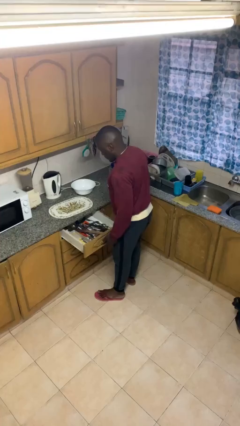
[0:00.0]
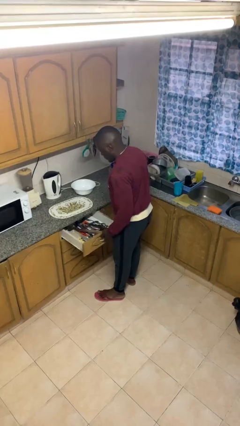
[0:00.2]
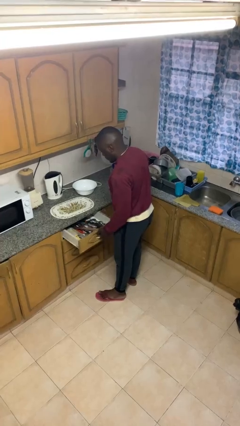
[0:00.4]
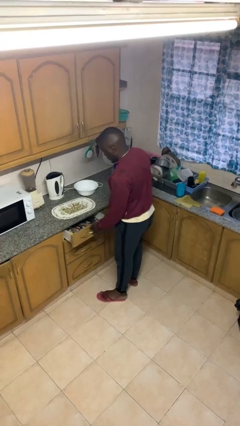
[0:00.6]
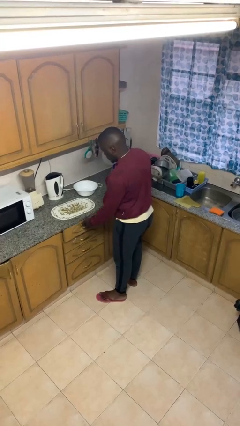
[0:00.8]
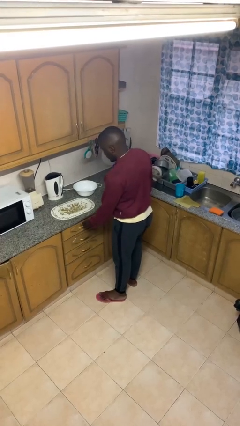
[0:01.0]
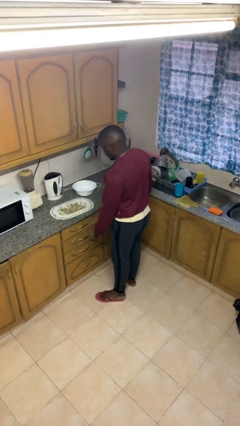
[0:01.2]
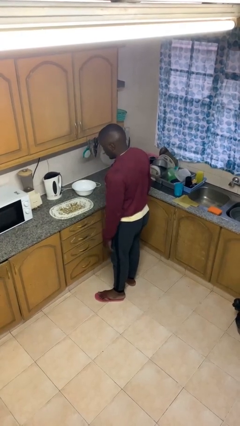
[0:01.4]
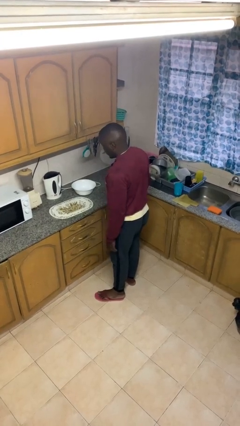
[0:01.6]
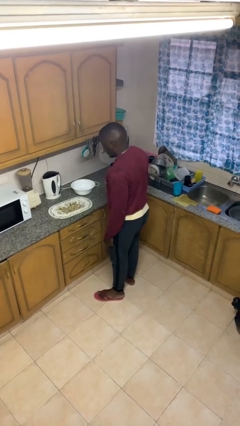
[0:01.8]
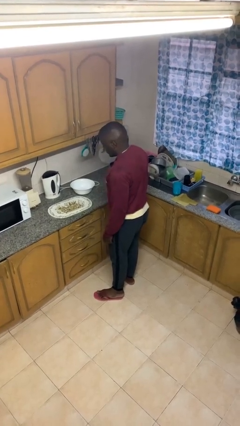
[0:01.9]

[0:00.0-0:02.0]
person closes kitchen drawer

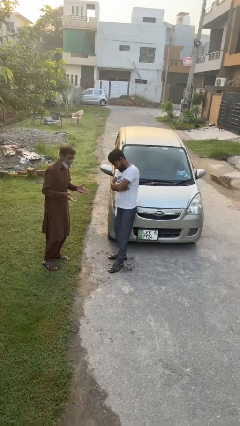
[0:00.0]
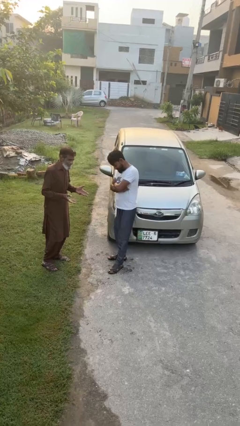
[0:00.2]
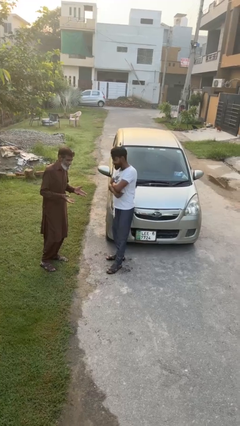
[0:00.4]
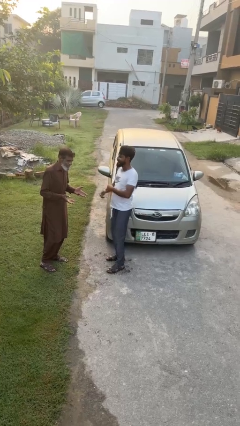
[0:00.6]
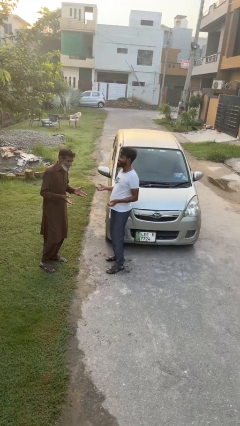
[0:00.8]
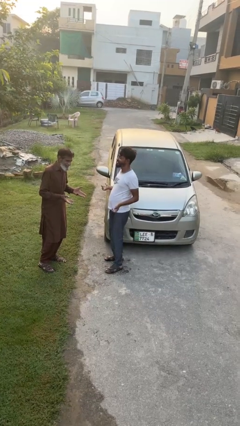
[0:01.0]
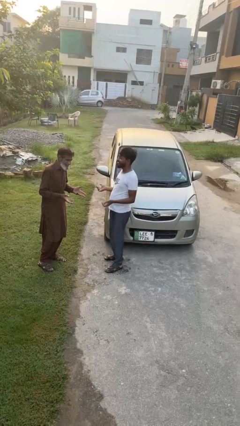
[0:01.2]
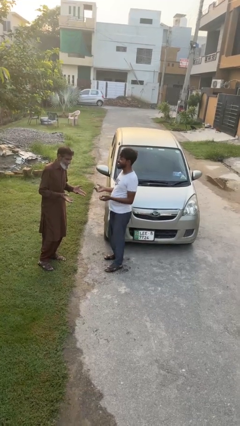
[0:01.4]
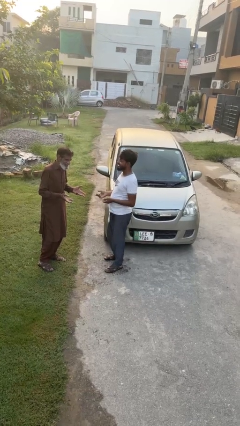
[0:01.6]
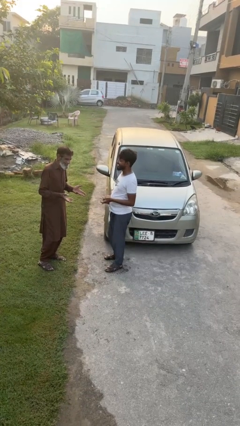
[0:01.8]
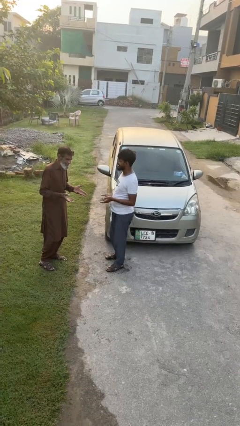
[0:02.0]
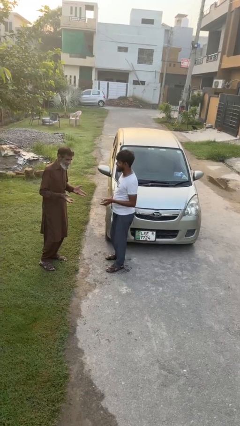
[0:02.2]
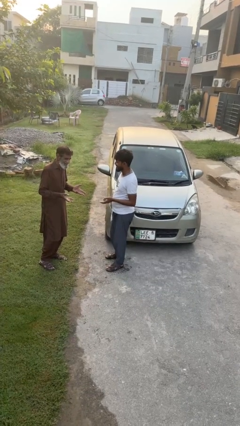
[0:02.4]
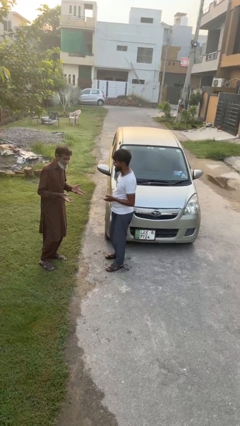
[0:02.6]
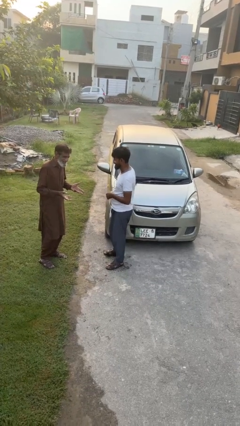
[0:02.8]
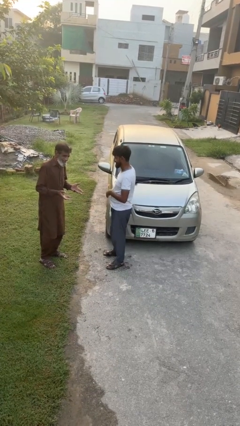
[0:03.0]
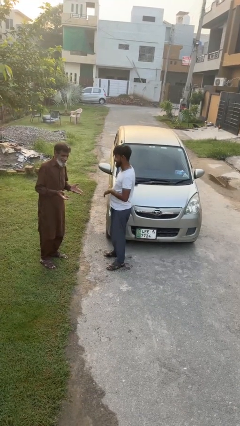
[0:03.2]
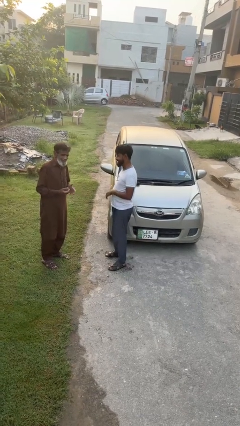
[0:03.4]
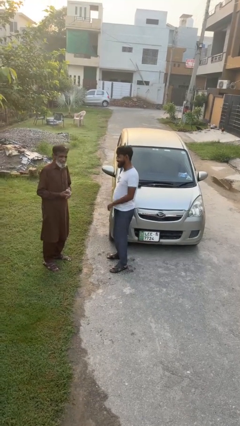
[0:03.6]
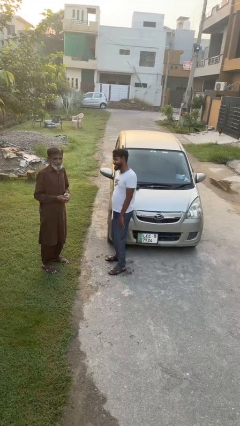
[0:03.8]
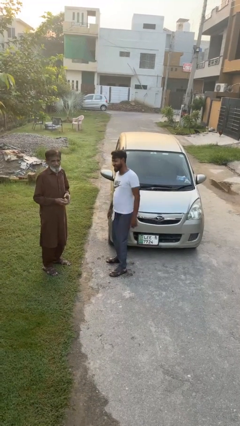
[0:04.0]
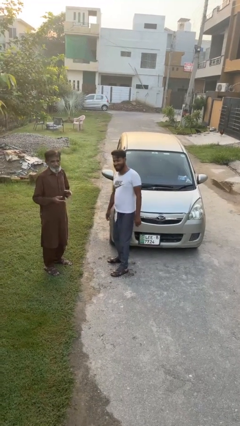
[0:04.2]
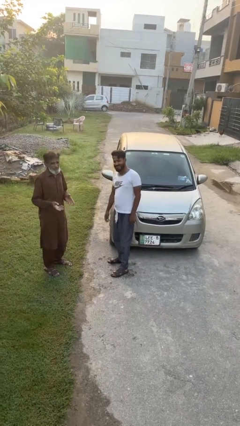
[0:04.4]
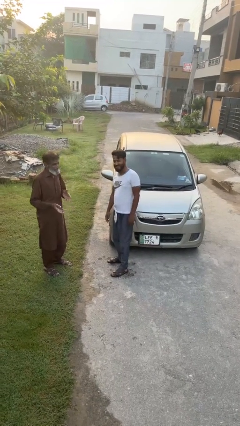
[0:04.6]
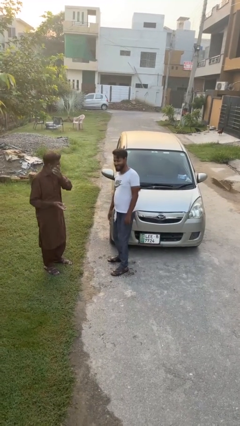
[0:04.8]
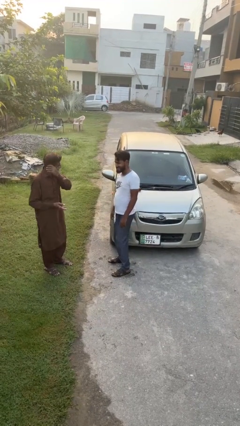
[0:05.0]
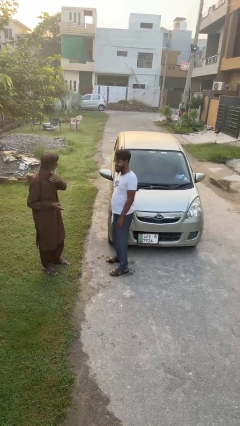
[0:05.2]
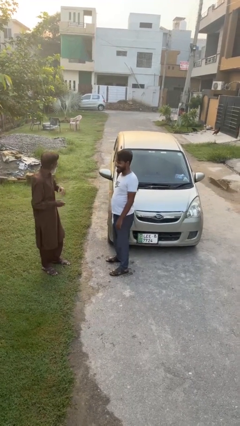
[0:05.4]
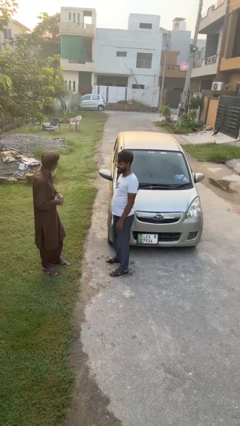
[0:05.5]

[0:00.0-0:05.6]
person laughs with person

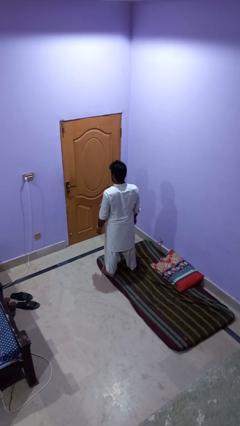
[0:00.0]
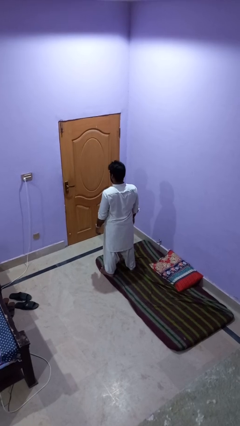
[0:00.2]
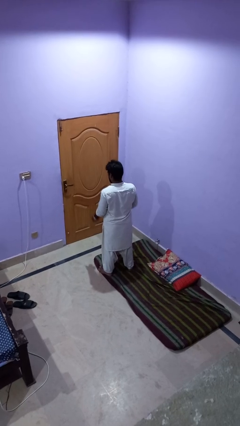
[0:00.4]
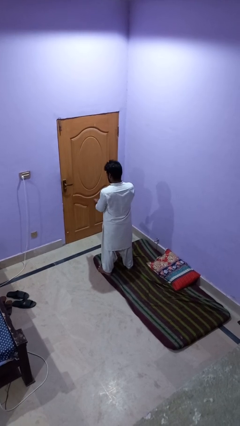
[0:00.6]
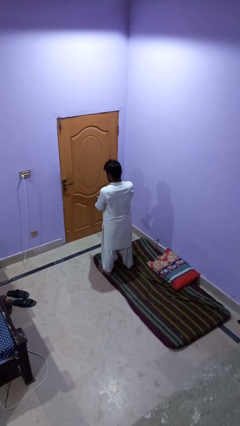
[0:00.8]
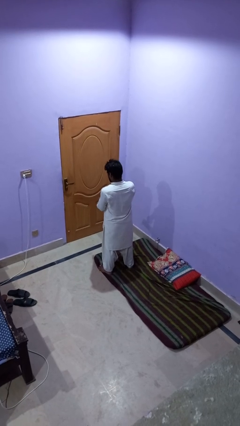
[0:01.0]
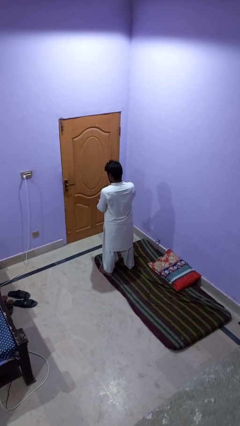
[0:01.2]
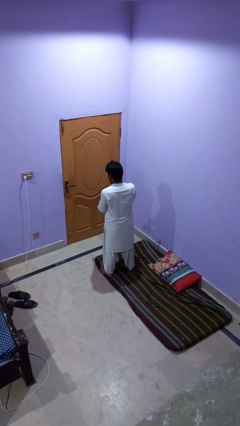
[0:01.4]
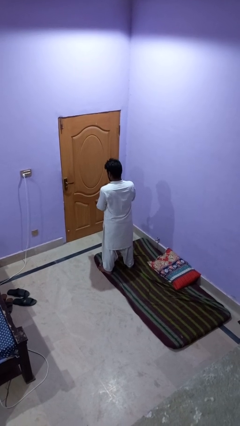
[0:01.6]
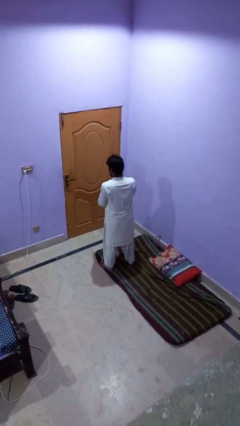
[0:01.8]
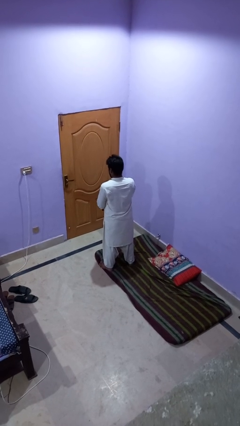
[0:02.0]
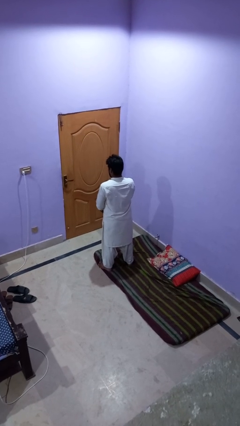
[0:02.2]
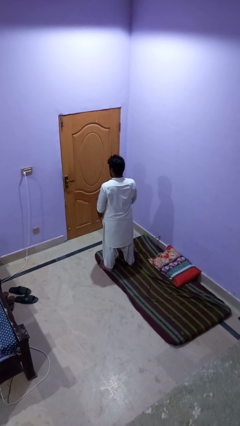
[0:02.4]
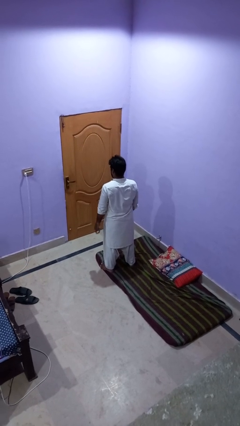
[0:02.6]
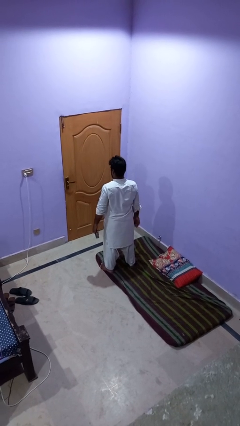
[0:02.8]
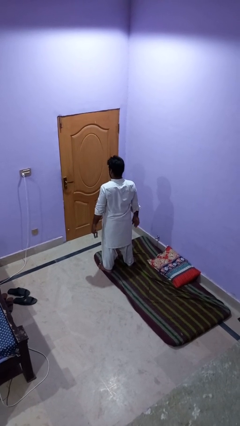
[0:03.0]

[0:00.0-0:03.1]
person takes off wristwatch

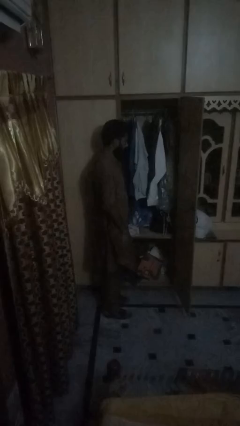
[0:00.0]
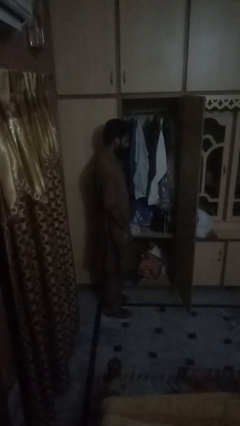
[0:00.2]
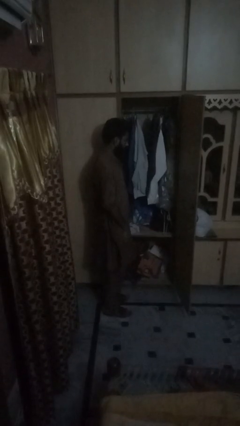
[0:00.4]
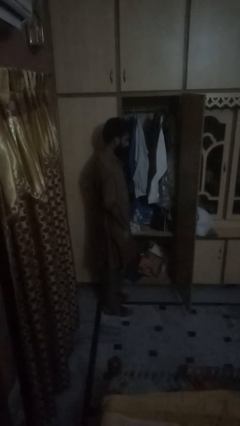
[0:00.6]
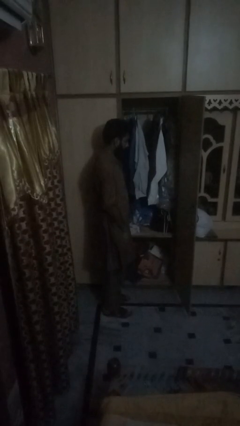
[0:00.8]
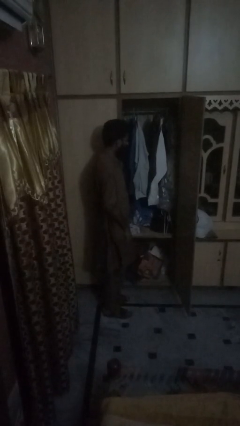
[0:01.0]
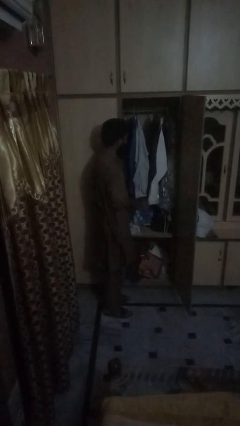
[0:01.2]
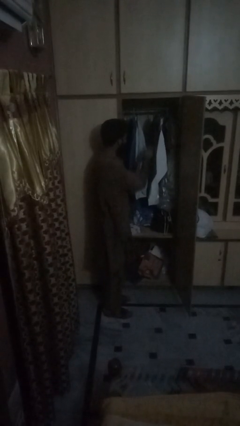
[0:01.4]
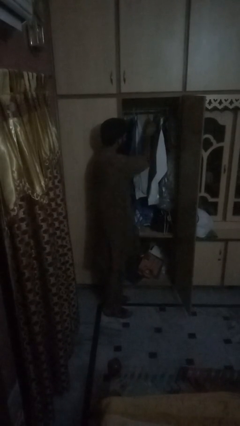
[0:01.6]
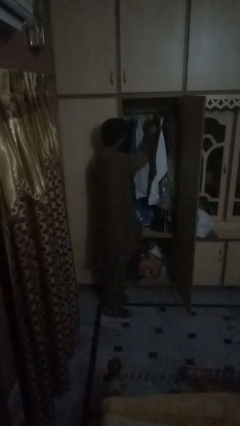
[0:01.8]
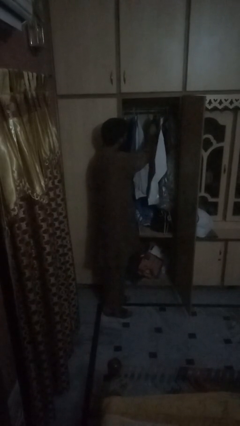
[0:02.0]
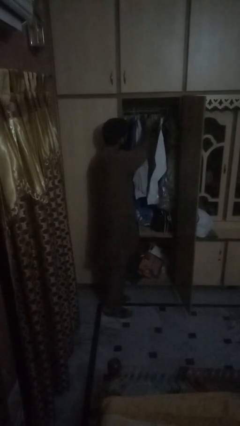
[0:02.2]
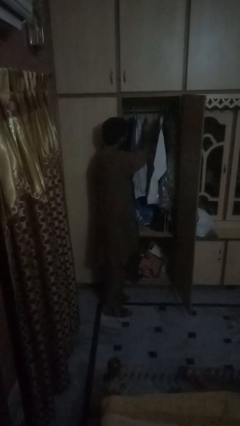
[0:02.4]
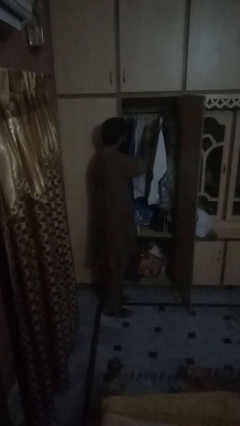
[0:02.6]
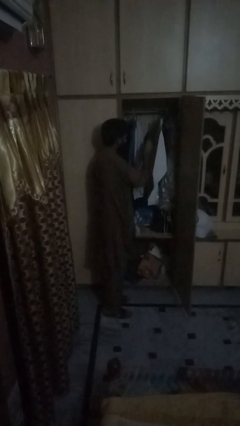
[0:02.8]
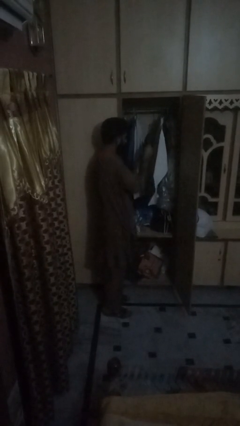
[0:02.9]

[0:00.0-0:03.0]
person puts clothes into dresser

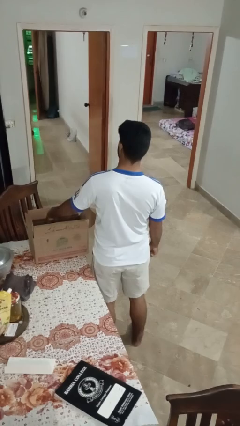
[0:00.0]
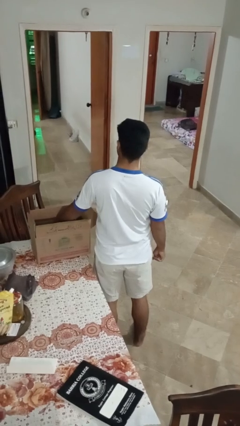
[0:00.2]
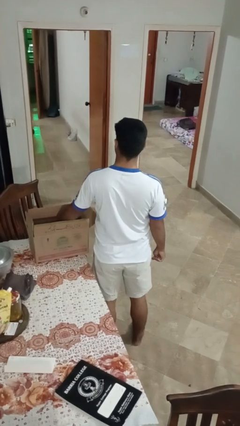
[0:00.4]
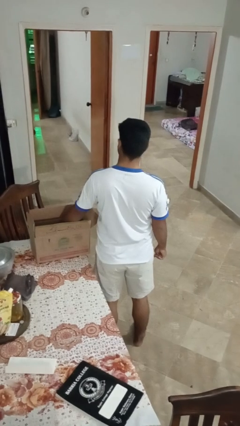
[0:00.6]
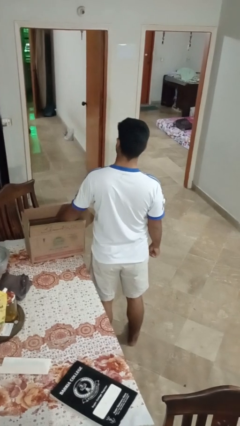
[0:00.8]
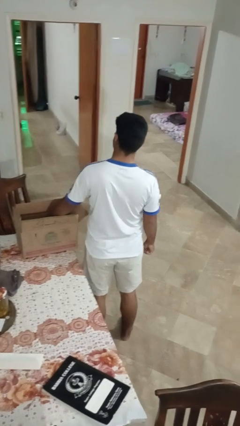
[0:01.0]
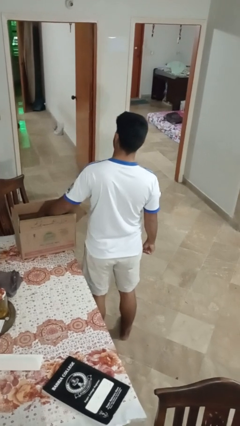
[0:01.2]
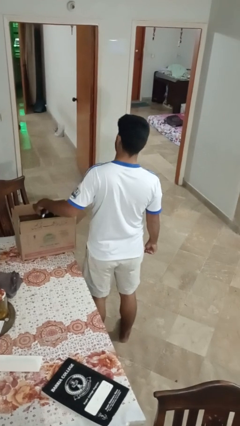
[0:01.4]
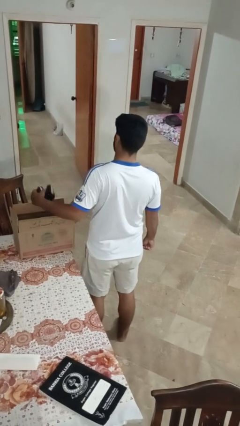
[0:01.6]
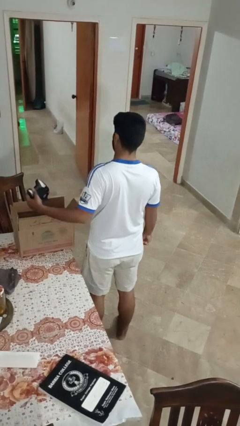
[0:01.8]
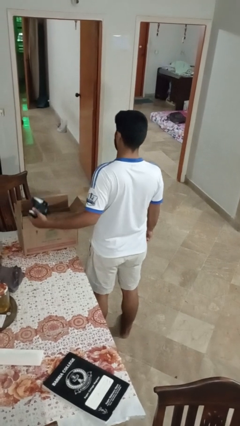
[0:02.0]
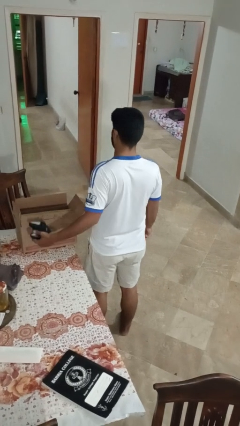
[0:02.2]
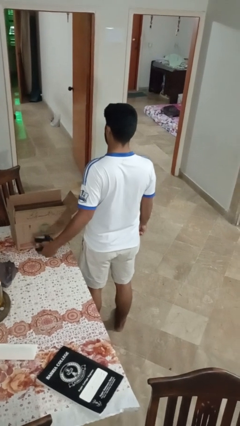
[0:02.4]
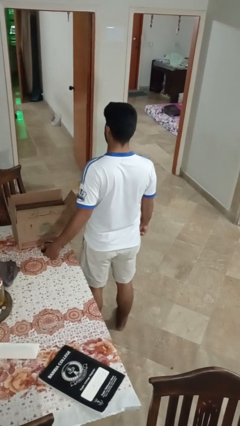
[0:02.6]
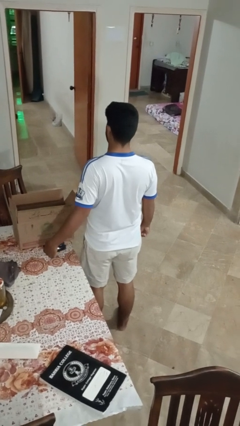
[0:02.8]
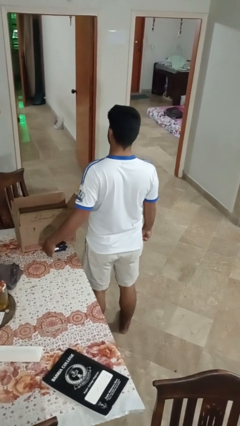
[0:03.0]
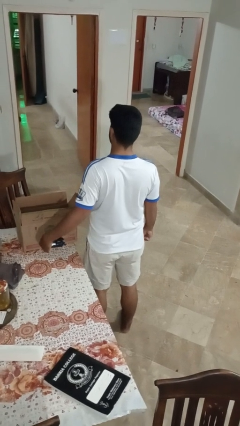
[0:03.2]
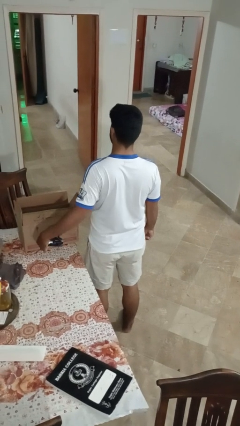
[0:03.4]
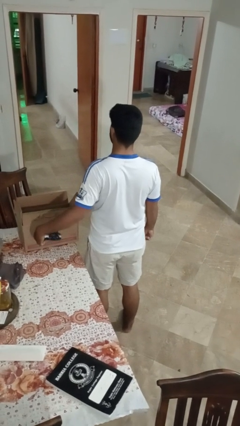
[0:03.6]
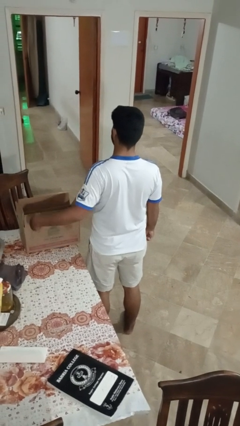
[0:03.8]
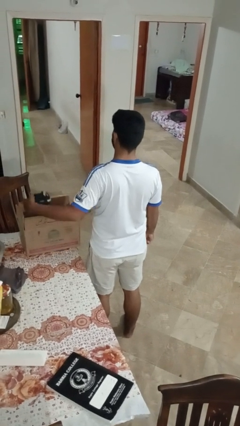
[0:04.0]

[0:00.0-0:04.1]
person takes object from box
